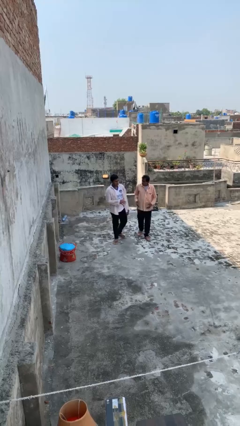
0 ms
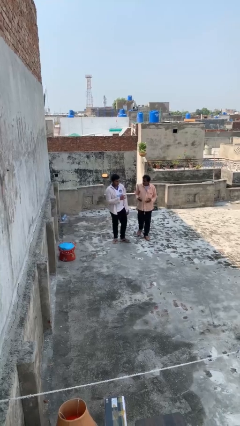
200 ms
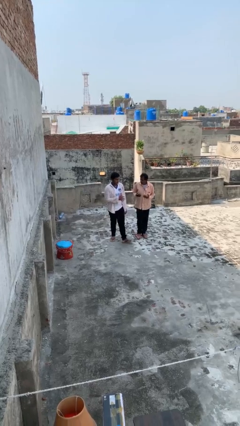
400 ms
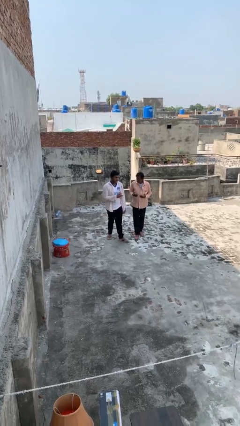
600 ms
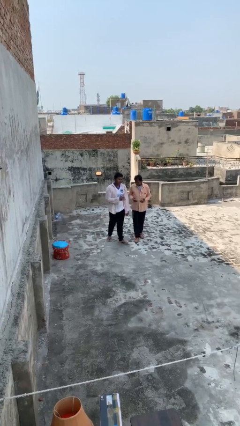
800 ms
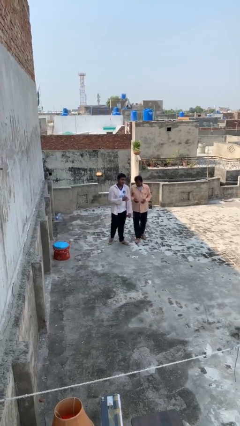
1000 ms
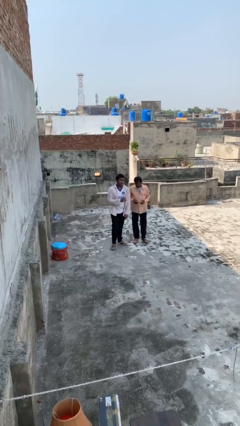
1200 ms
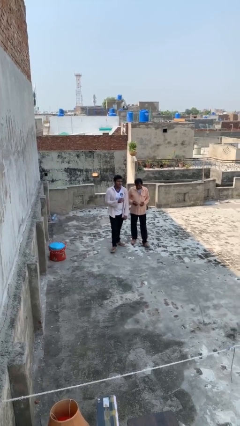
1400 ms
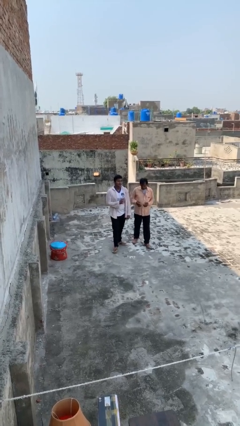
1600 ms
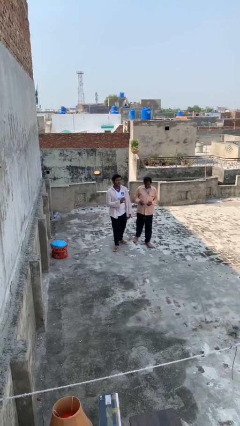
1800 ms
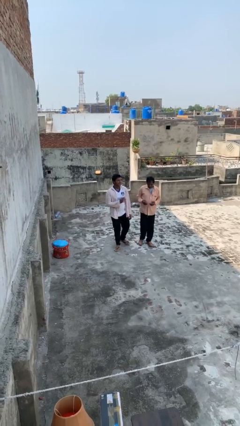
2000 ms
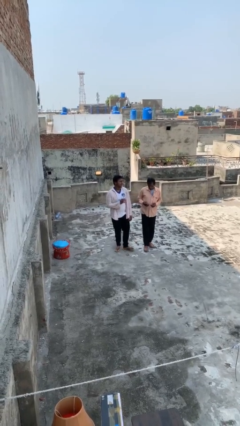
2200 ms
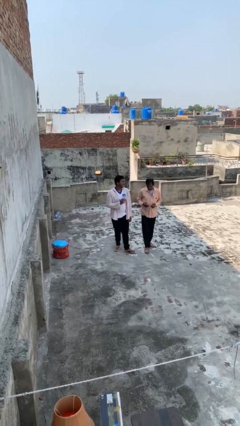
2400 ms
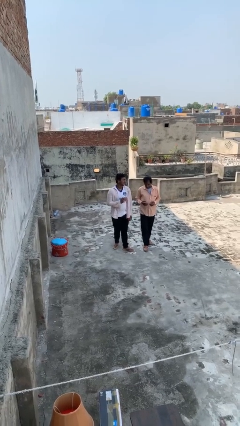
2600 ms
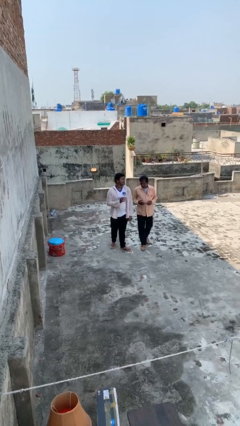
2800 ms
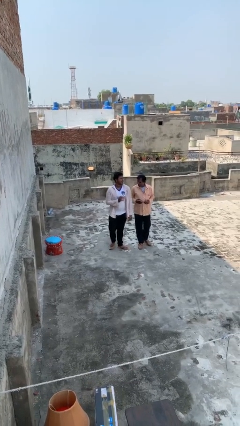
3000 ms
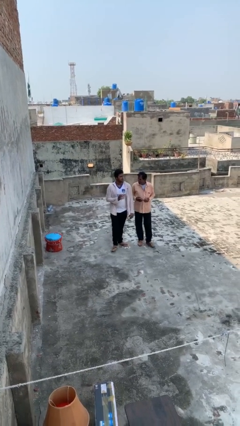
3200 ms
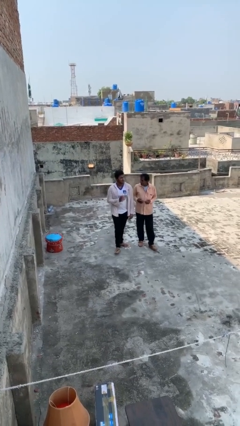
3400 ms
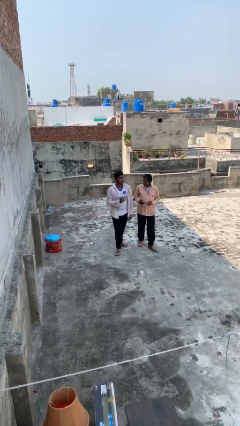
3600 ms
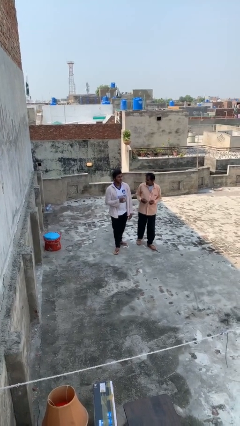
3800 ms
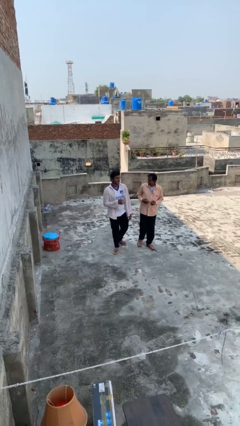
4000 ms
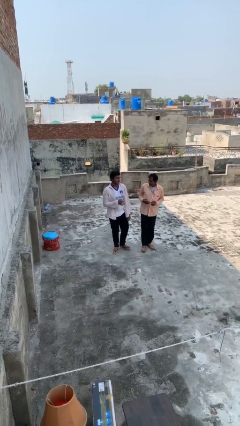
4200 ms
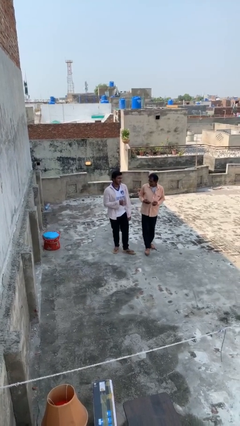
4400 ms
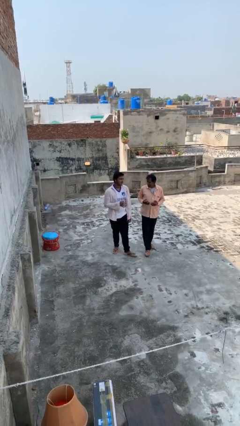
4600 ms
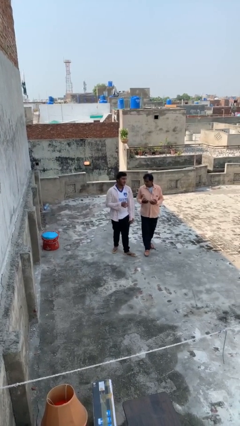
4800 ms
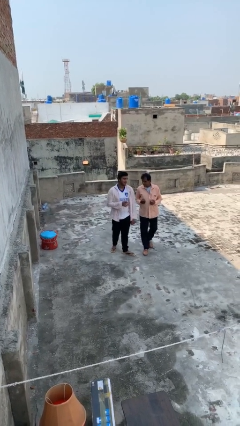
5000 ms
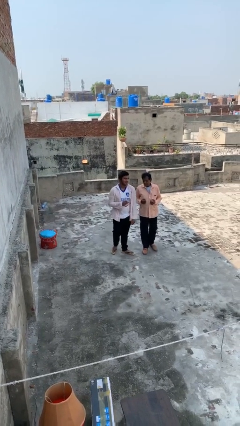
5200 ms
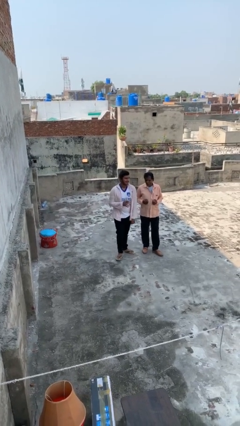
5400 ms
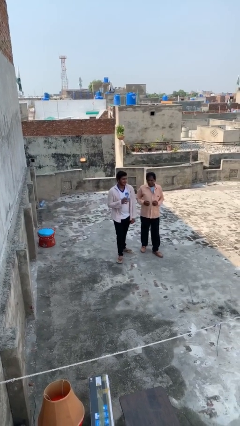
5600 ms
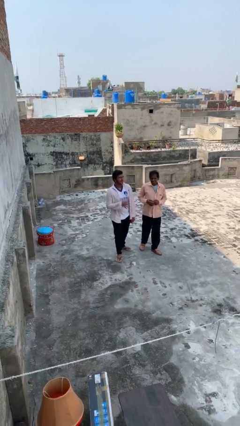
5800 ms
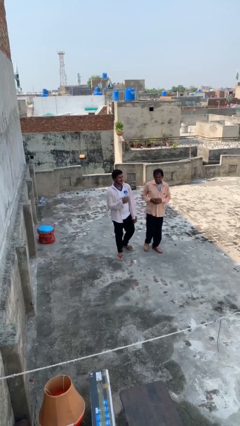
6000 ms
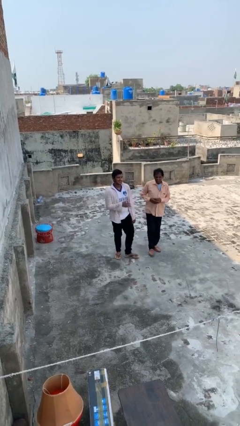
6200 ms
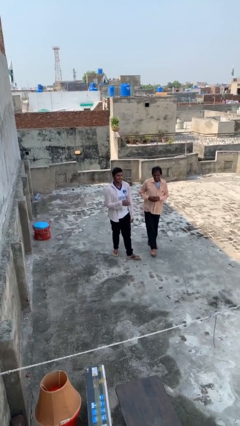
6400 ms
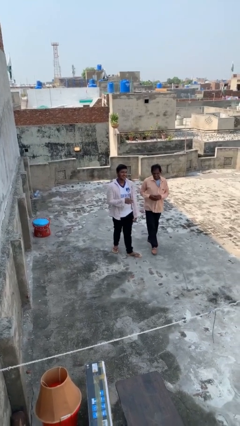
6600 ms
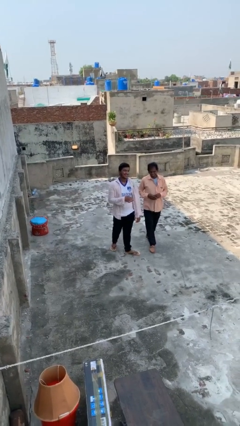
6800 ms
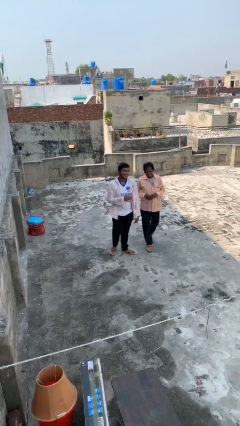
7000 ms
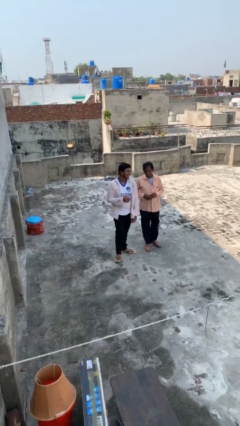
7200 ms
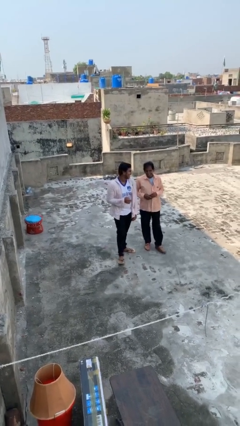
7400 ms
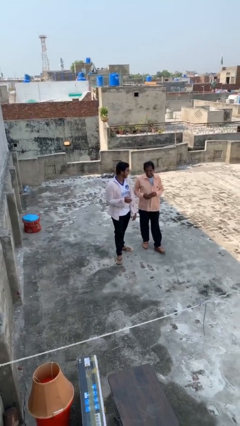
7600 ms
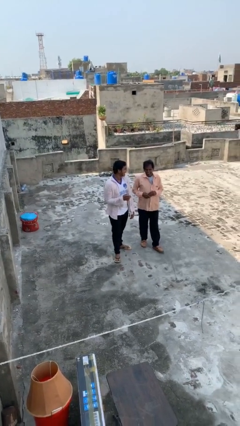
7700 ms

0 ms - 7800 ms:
person talks to person

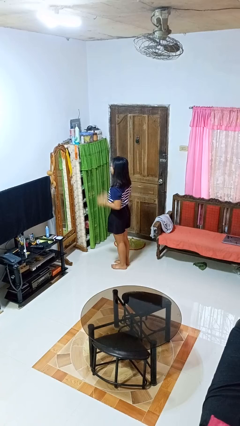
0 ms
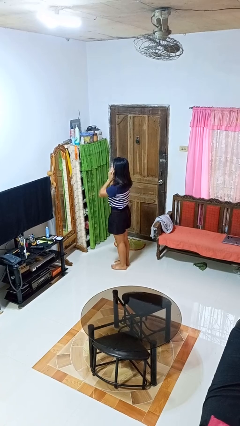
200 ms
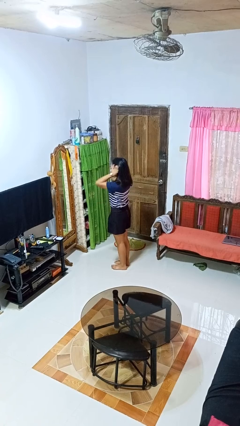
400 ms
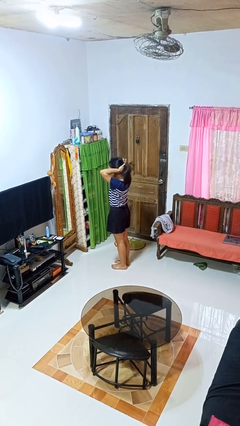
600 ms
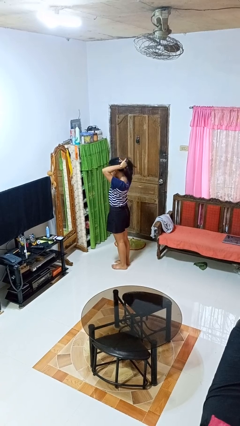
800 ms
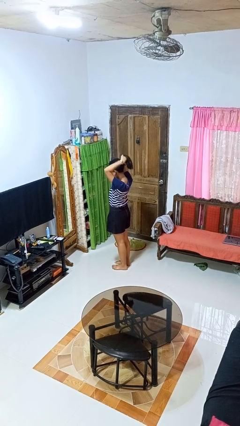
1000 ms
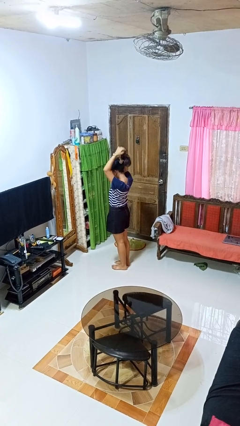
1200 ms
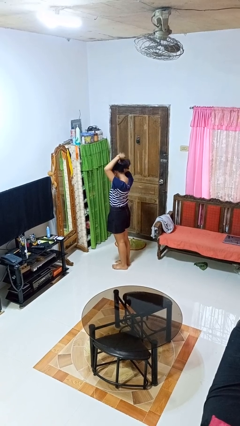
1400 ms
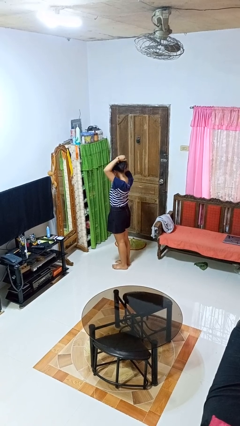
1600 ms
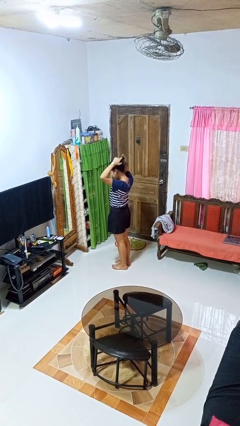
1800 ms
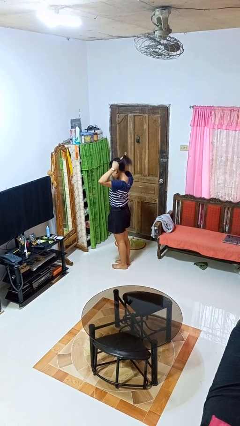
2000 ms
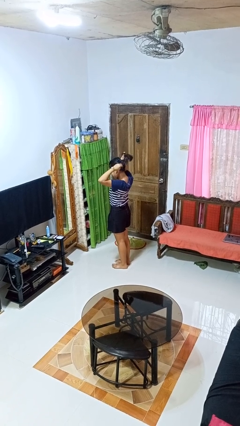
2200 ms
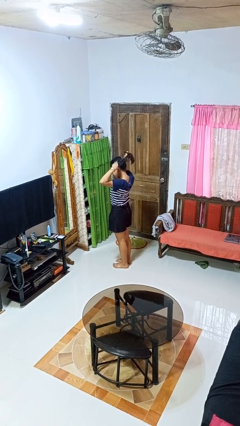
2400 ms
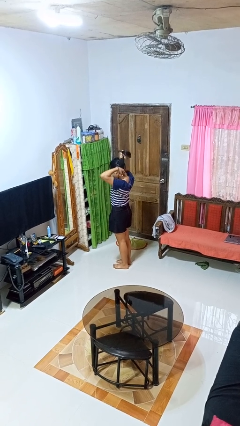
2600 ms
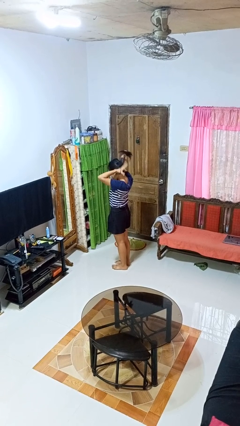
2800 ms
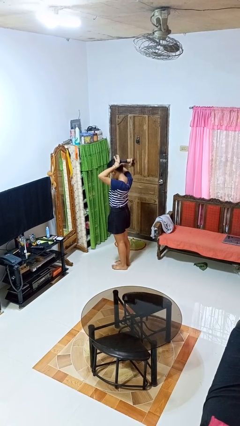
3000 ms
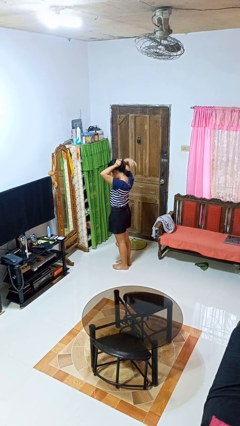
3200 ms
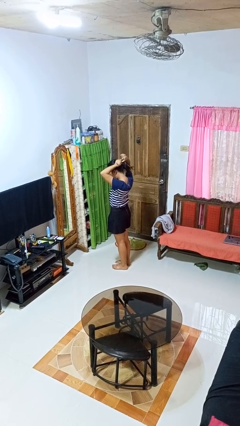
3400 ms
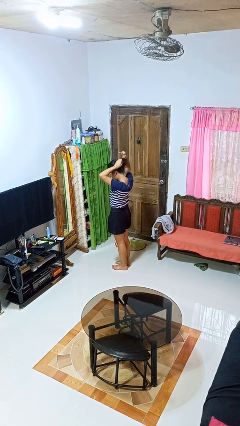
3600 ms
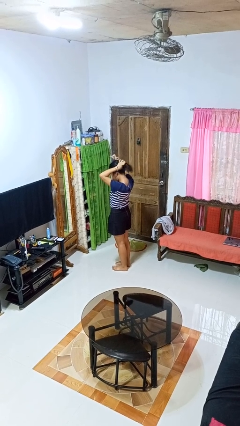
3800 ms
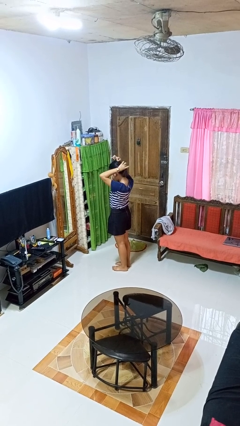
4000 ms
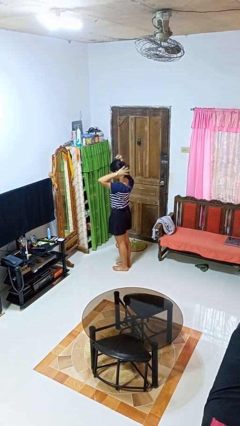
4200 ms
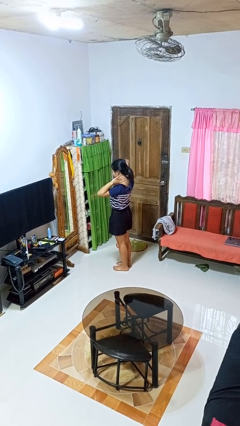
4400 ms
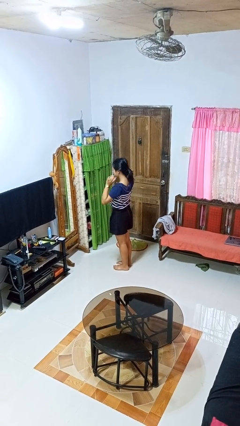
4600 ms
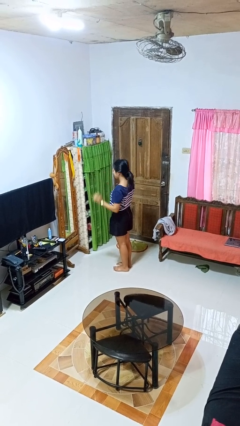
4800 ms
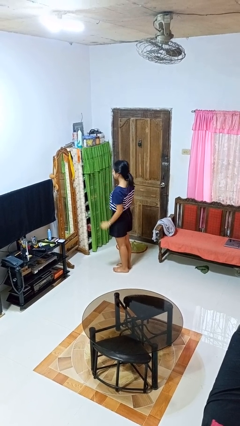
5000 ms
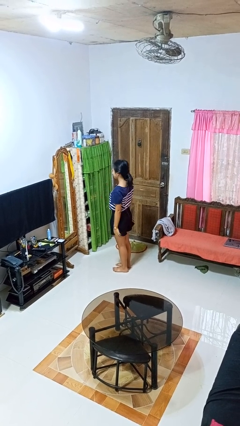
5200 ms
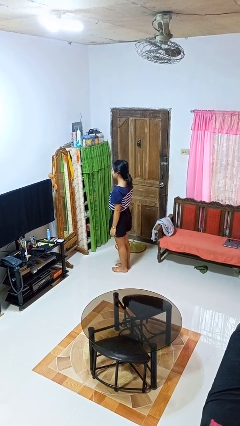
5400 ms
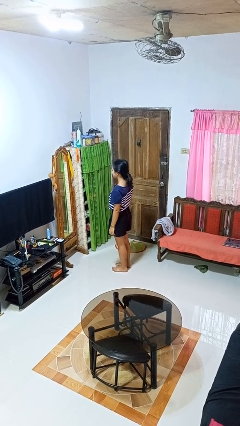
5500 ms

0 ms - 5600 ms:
person puts hair in ponytail

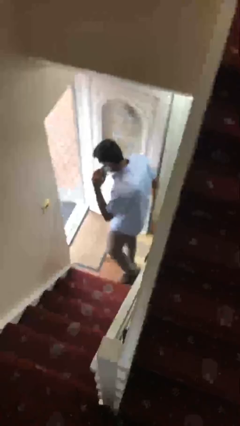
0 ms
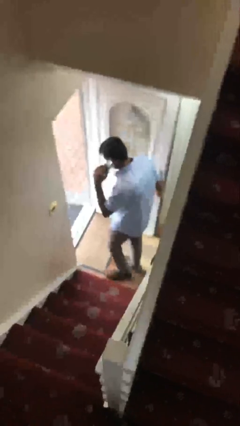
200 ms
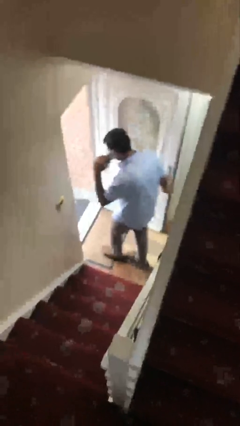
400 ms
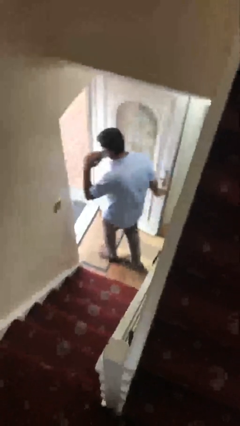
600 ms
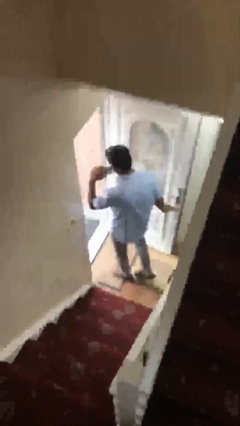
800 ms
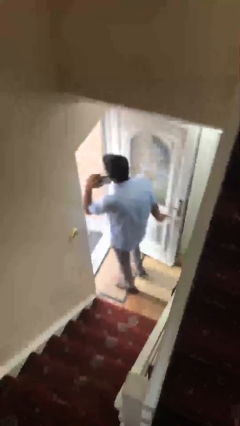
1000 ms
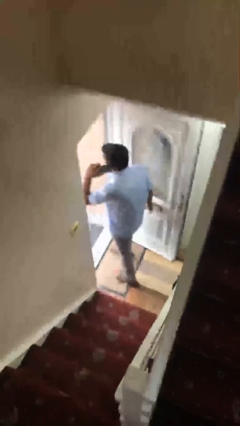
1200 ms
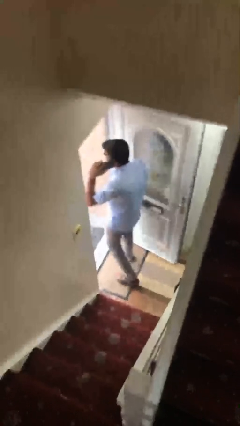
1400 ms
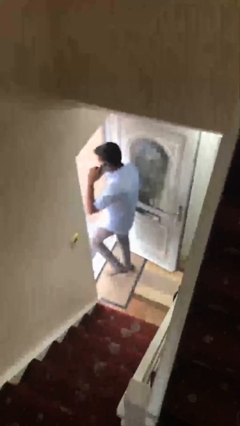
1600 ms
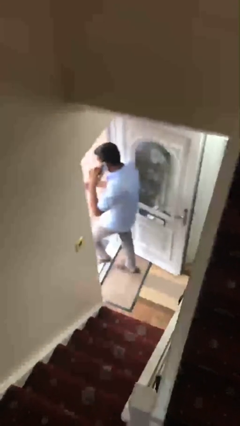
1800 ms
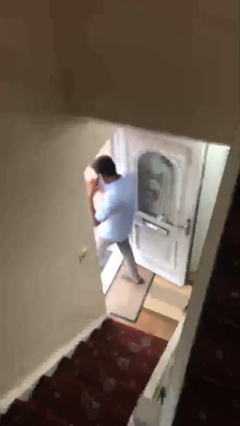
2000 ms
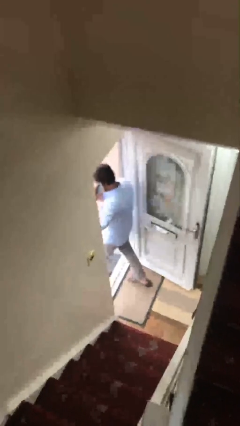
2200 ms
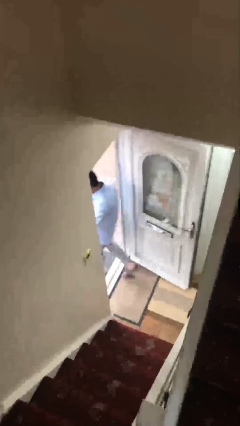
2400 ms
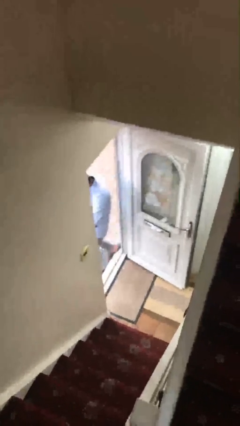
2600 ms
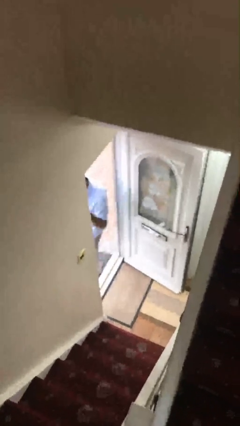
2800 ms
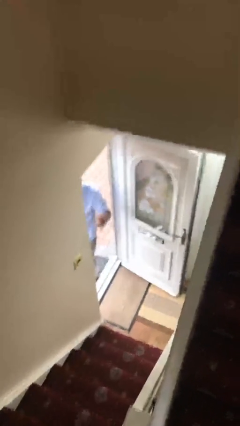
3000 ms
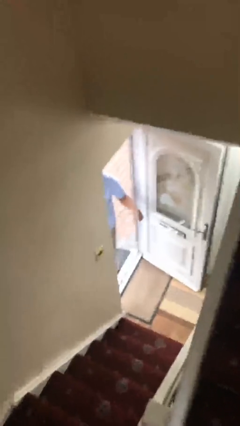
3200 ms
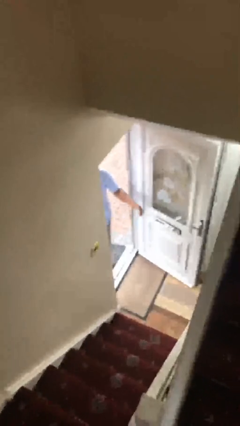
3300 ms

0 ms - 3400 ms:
person exits scene through structure

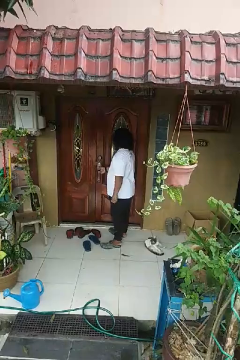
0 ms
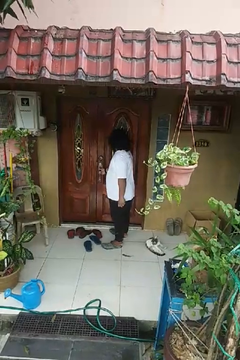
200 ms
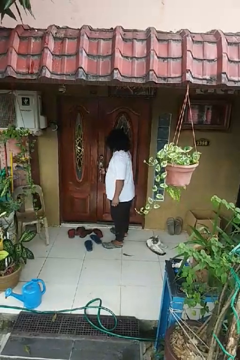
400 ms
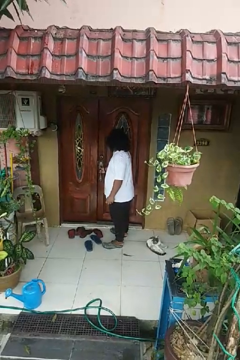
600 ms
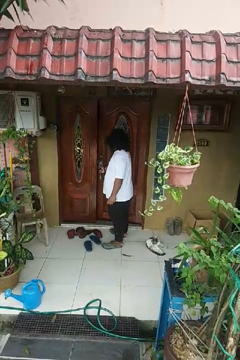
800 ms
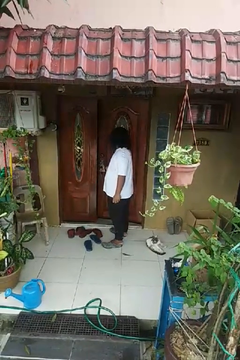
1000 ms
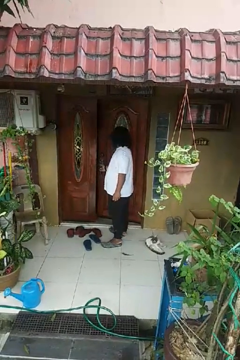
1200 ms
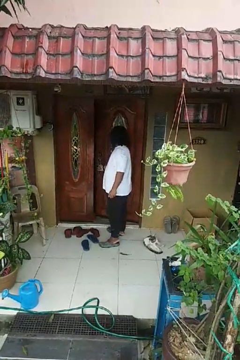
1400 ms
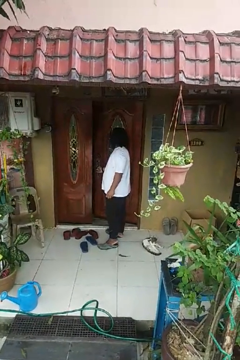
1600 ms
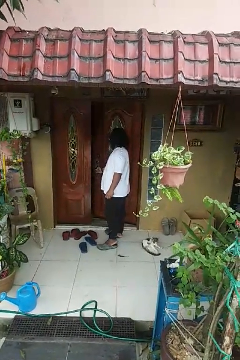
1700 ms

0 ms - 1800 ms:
person opens facility door
